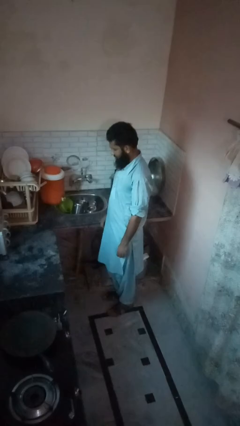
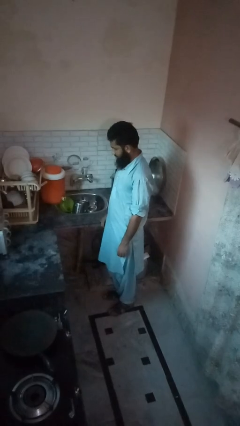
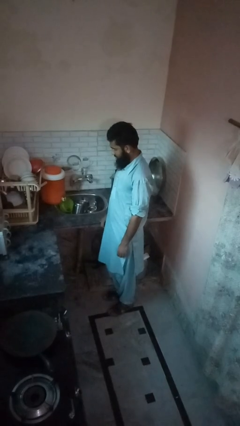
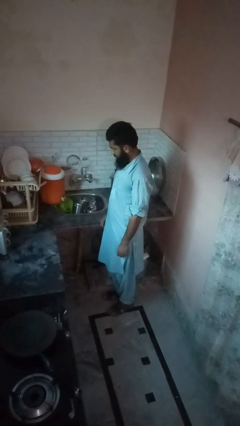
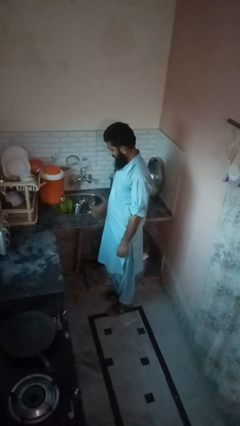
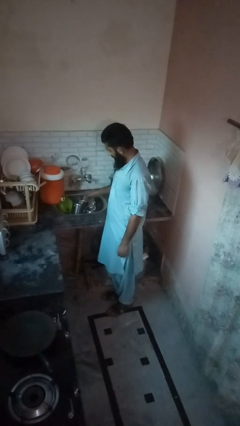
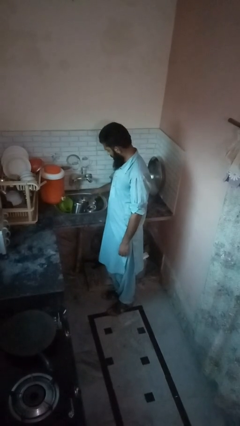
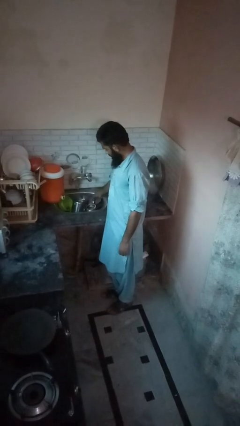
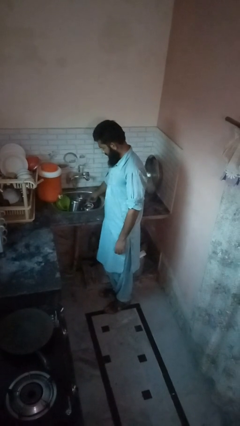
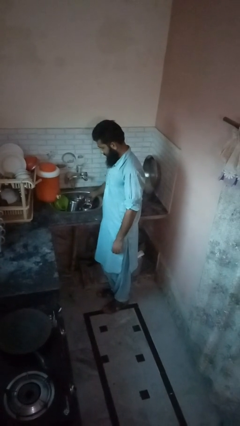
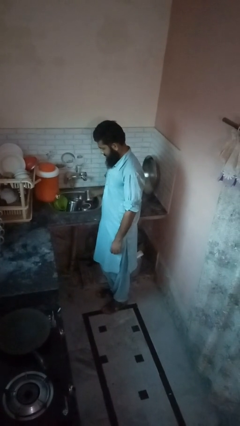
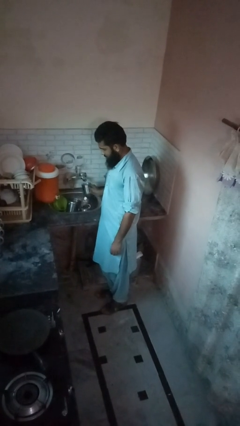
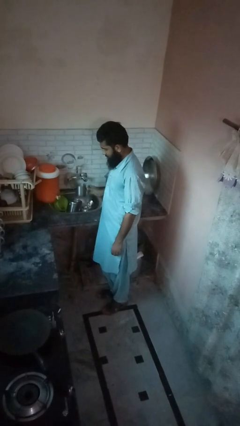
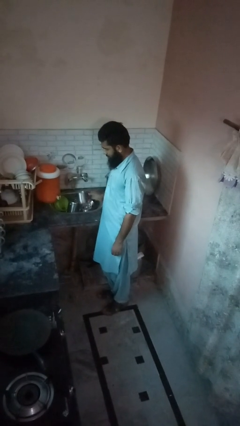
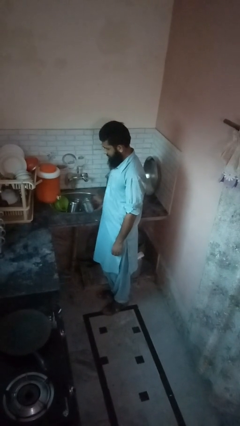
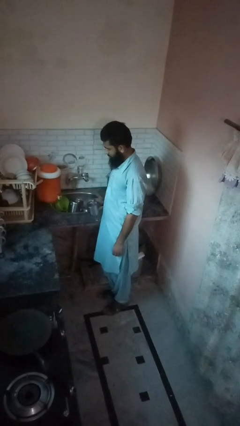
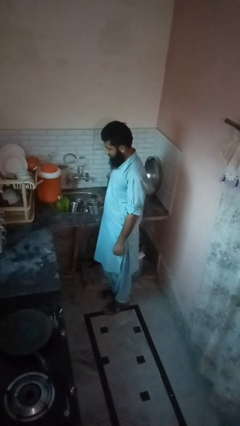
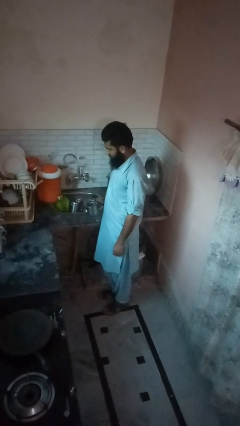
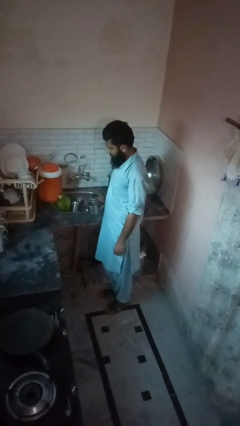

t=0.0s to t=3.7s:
person picks up object from countertop

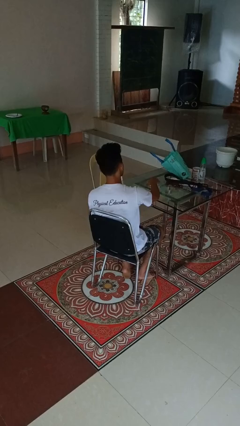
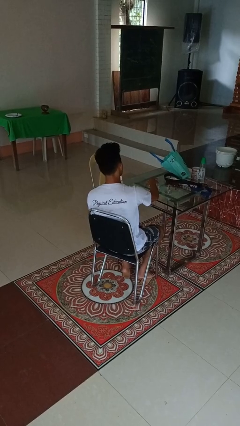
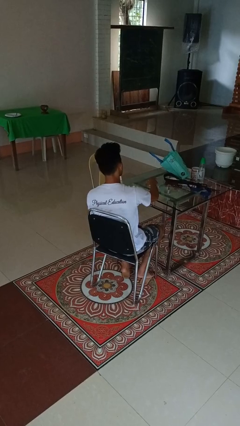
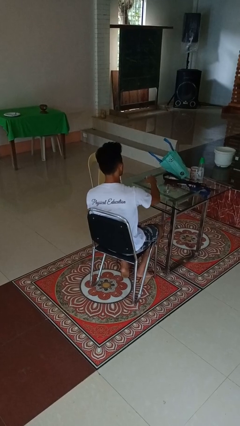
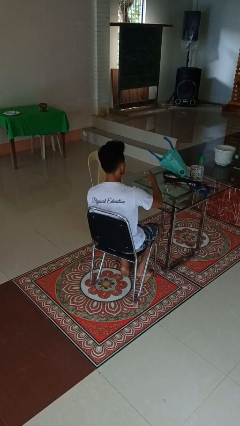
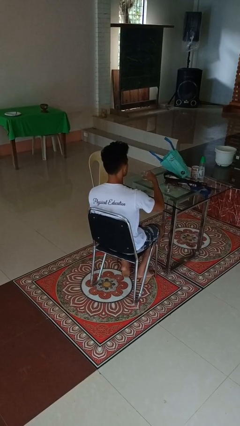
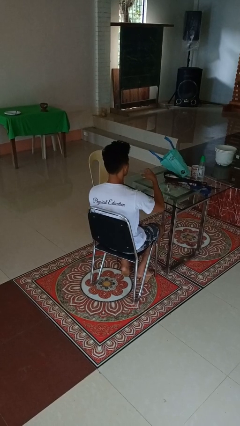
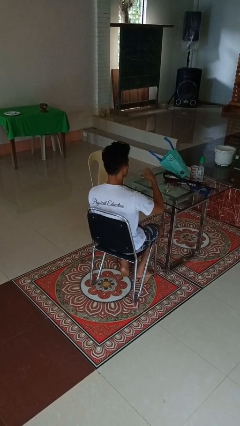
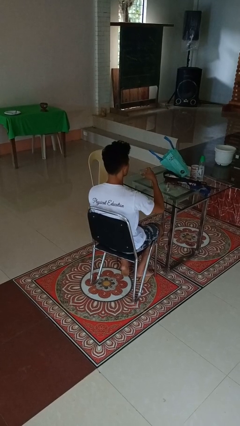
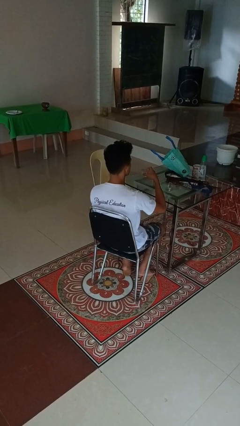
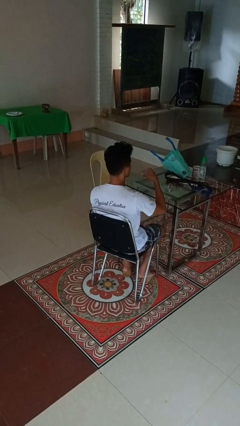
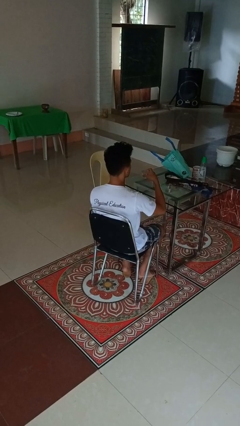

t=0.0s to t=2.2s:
person picks up object from table

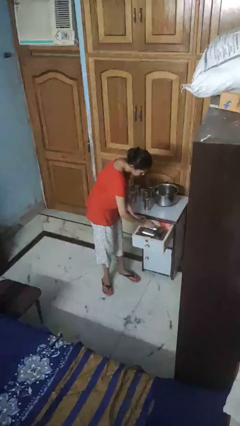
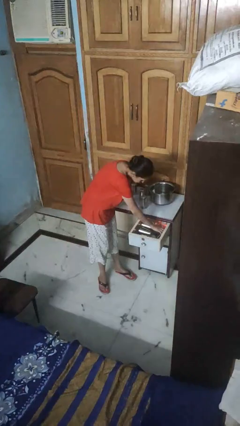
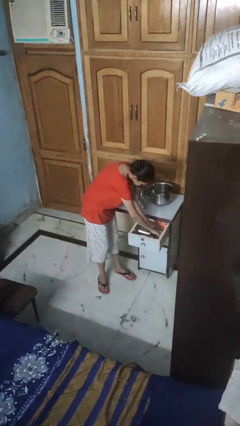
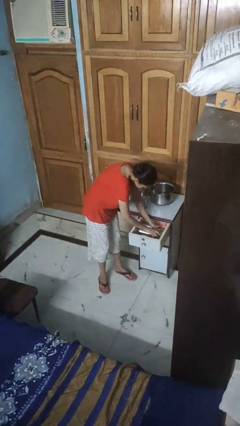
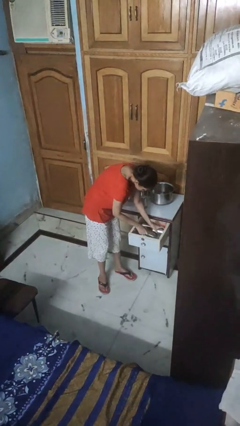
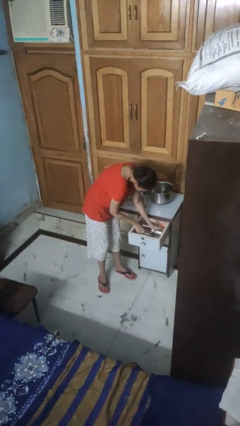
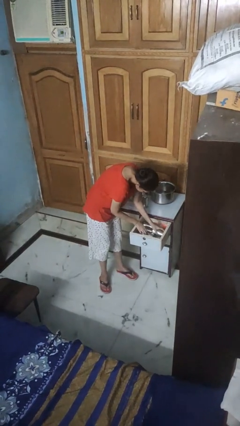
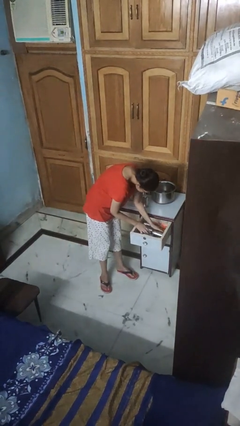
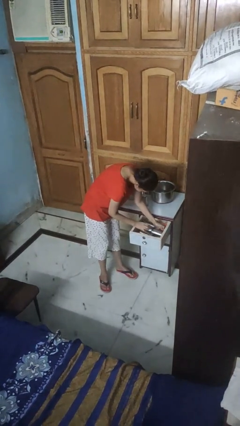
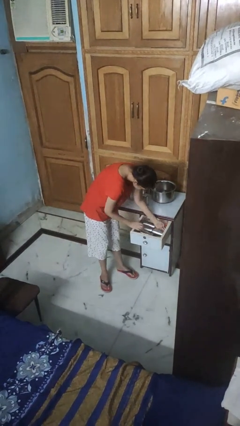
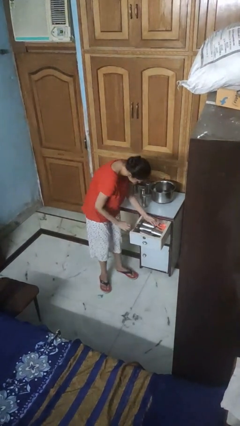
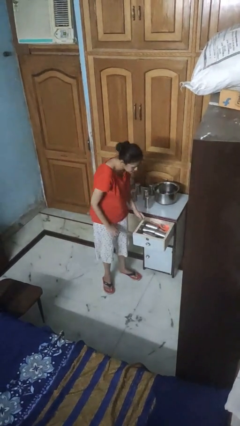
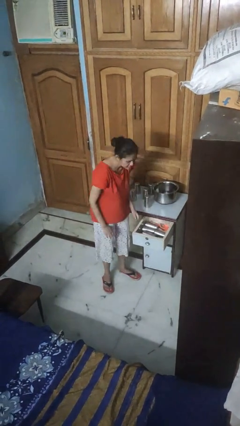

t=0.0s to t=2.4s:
person searches in kitchen drawer

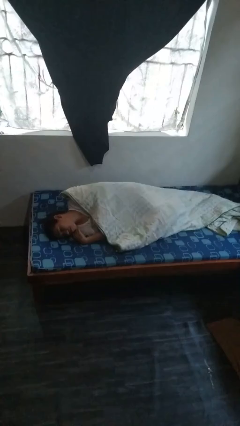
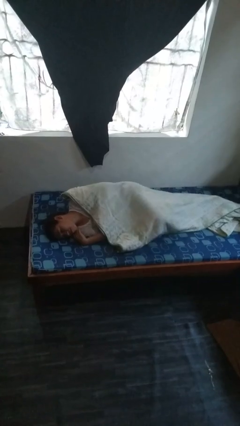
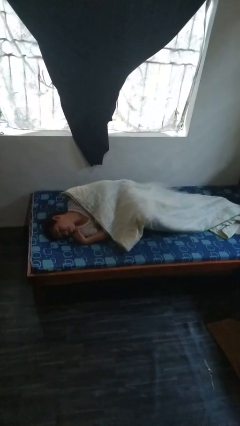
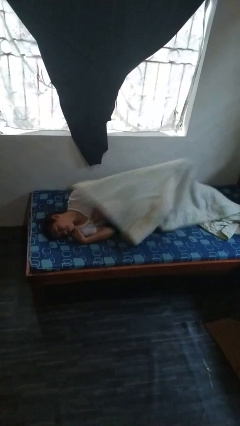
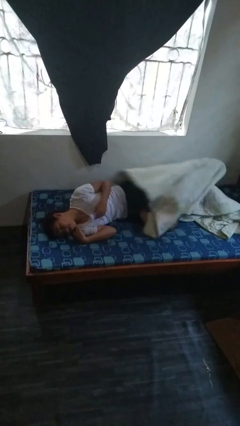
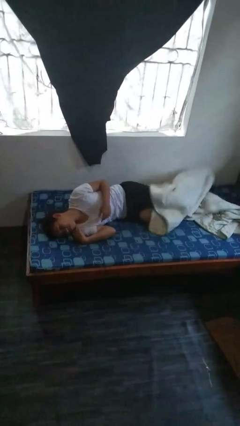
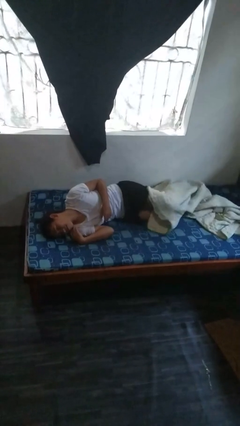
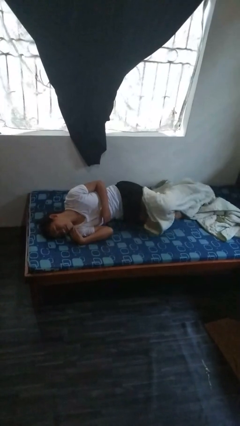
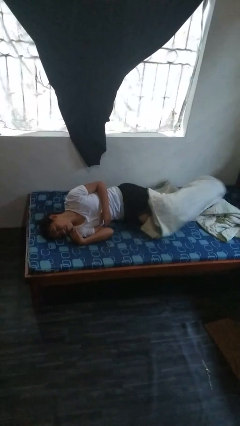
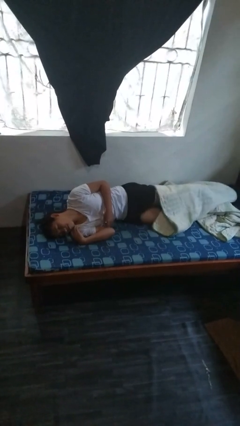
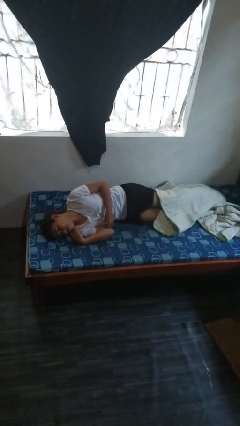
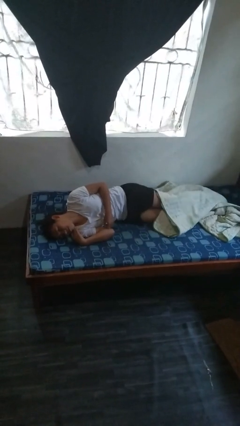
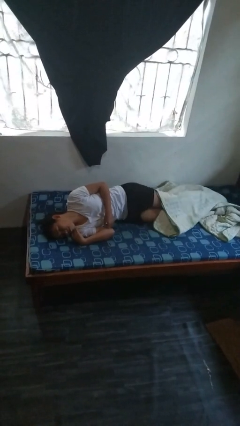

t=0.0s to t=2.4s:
person uncovers with bedsheets

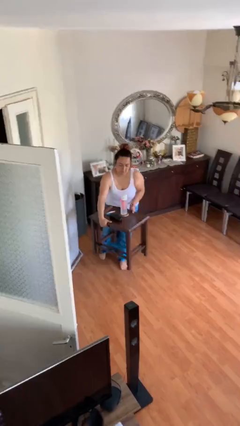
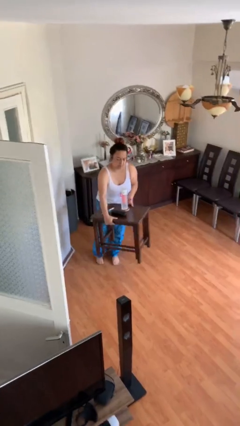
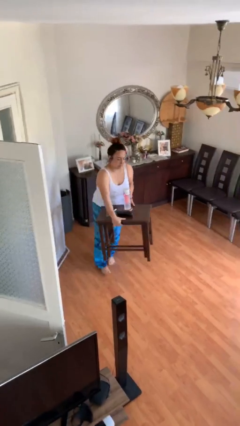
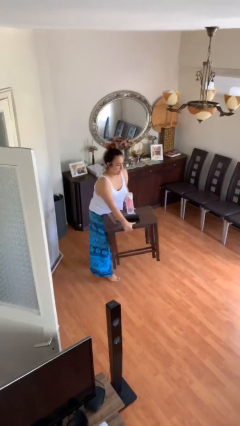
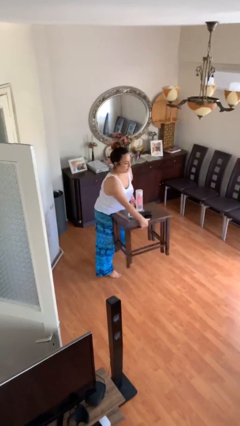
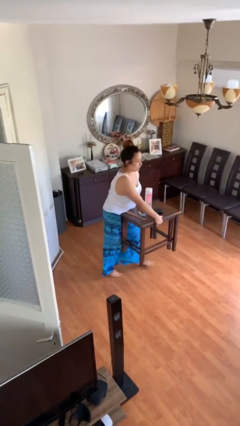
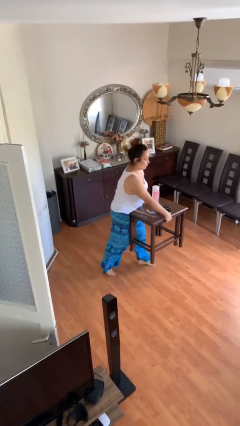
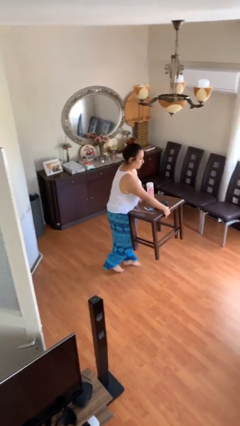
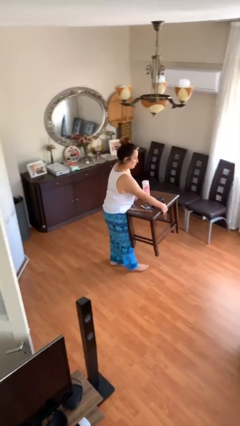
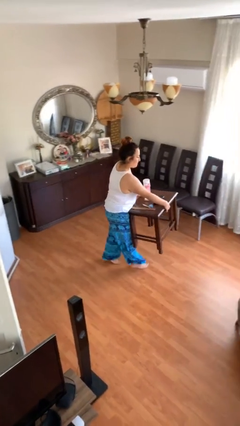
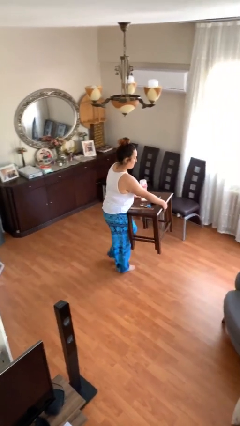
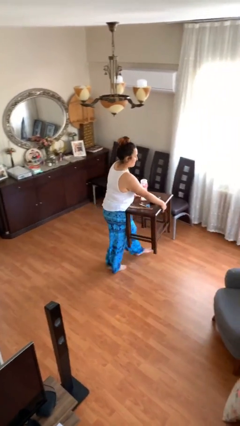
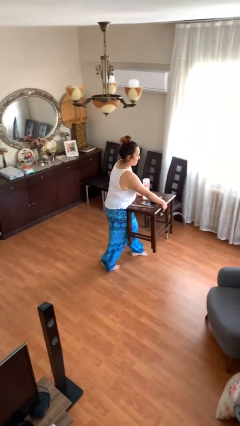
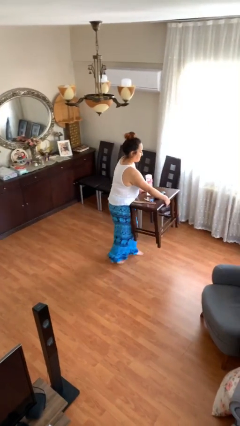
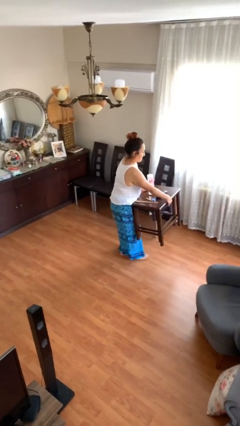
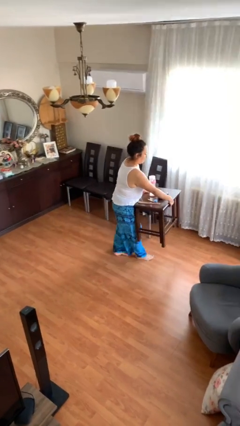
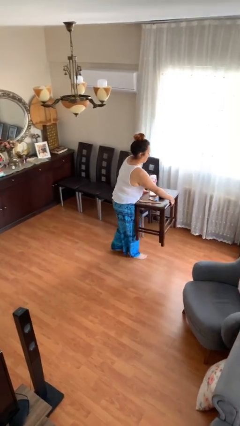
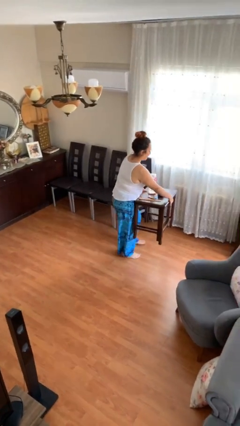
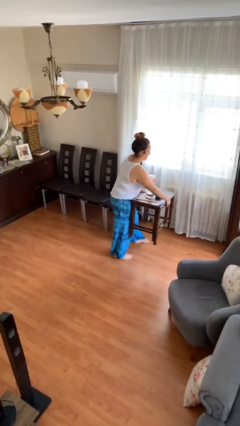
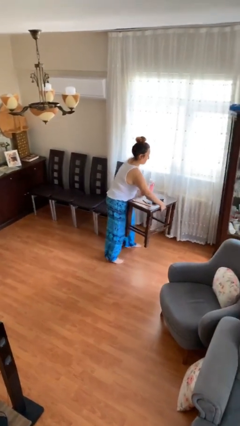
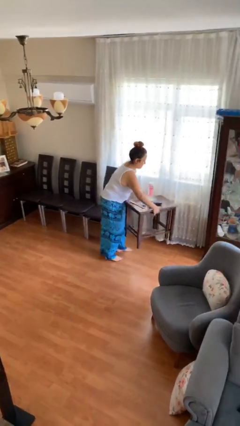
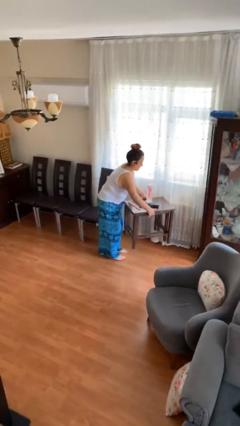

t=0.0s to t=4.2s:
person carries heavy object

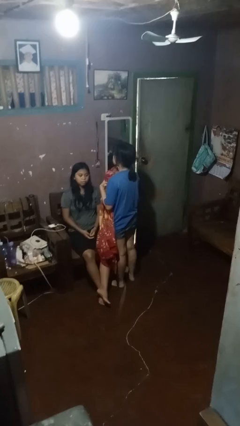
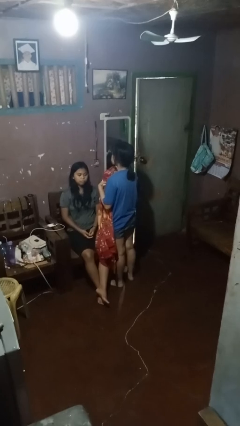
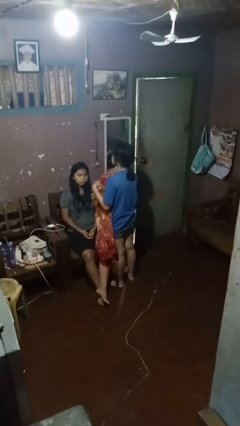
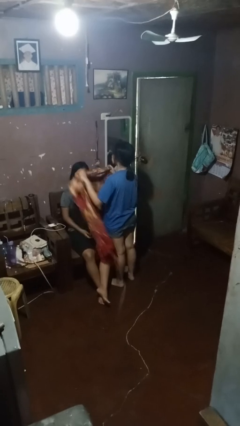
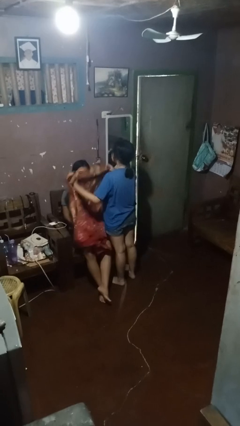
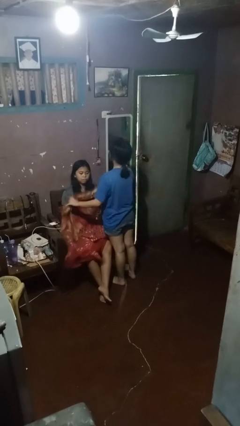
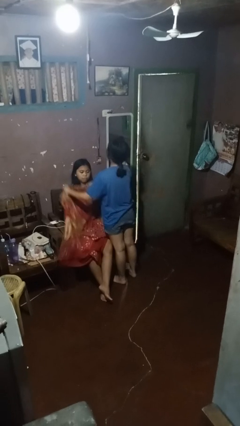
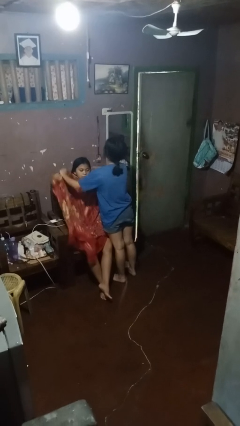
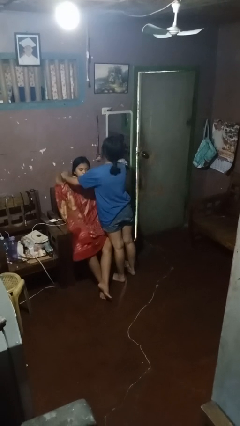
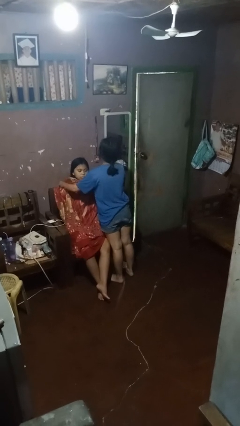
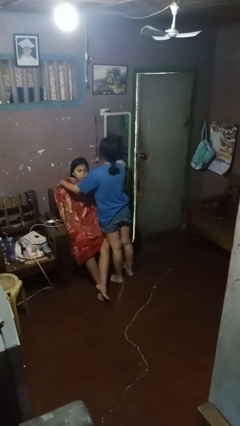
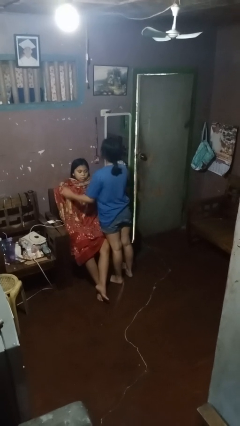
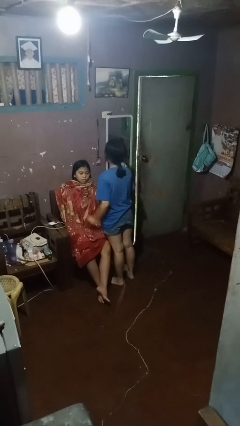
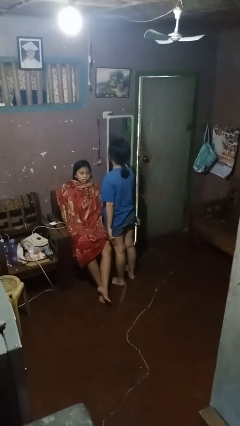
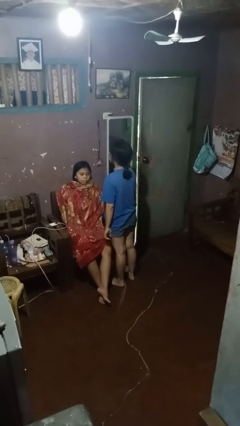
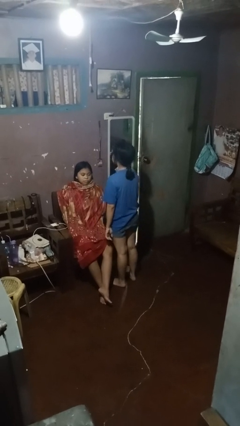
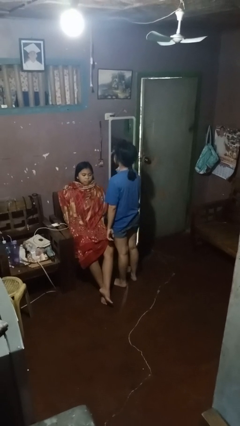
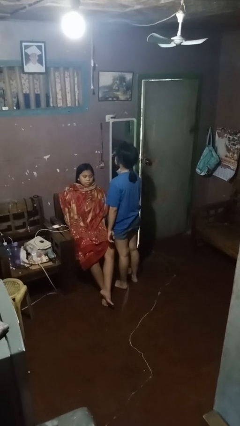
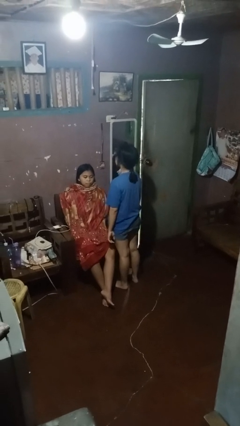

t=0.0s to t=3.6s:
person covers friend with blanket
